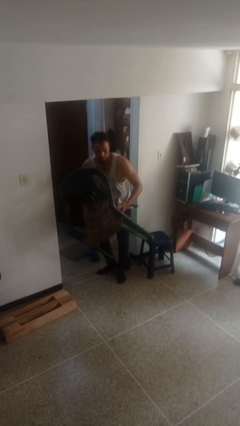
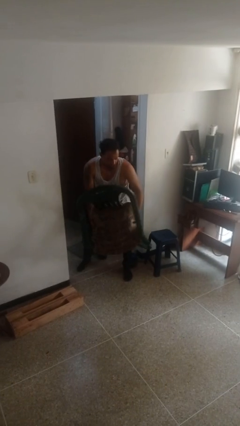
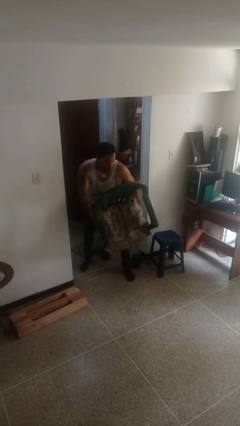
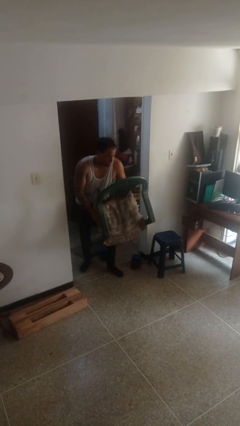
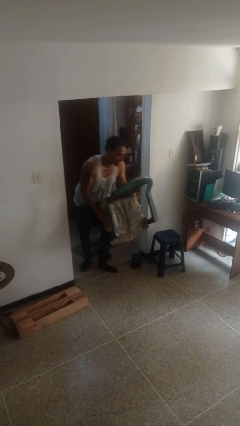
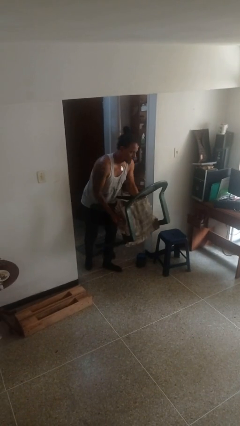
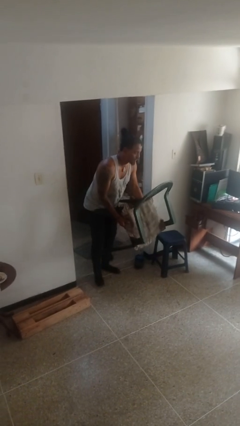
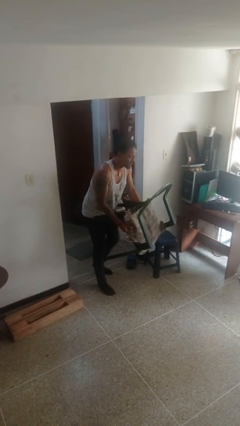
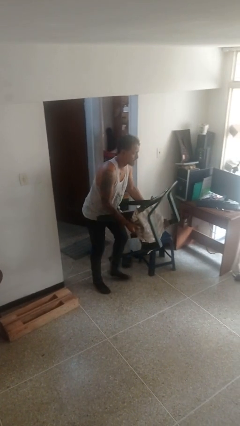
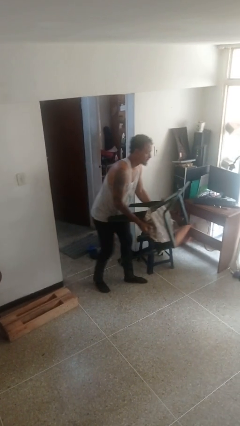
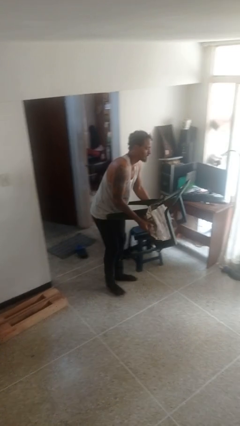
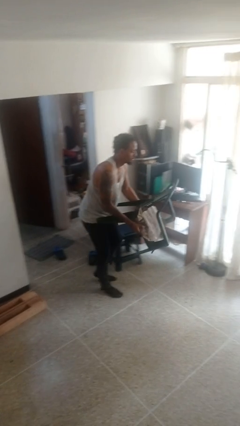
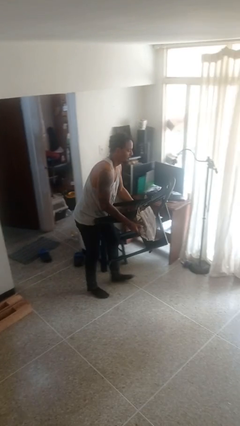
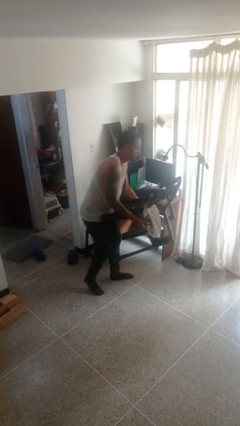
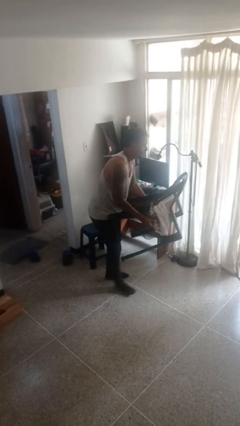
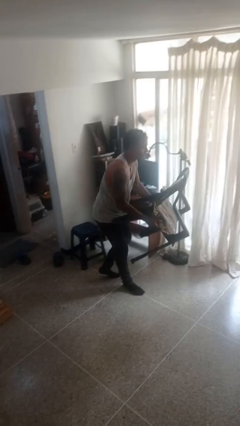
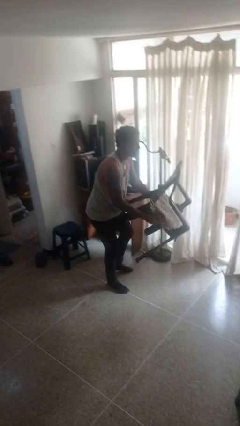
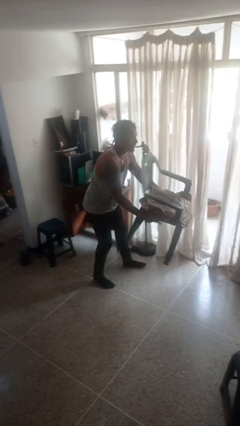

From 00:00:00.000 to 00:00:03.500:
person carries furniture

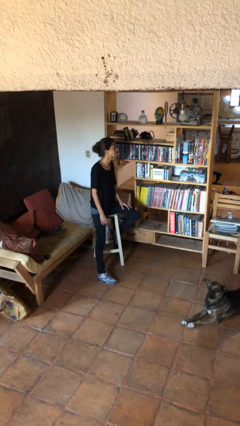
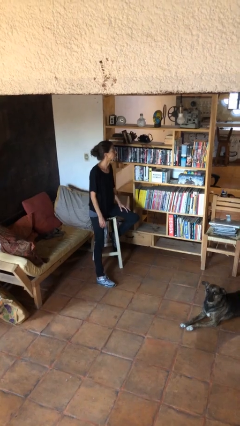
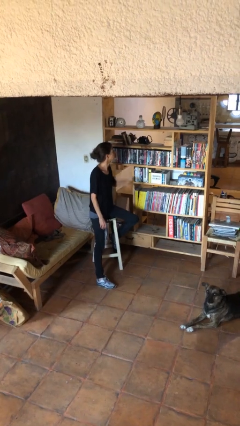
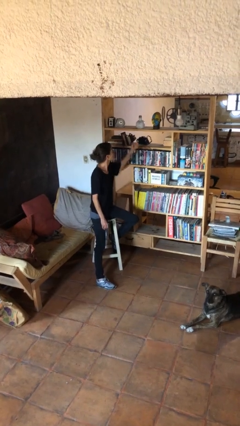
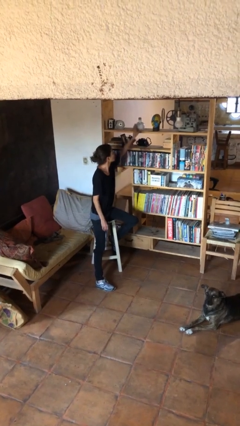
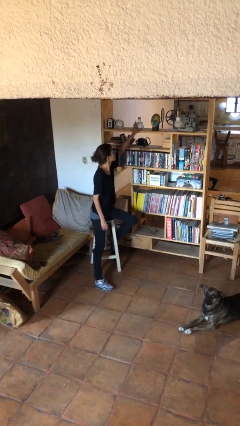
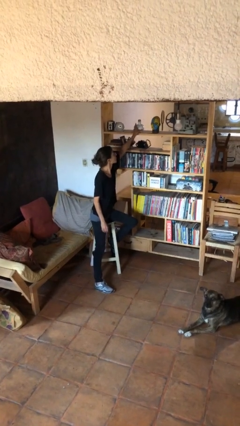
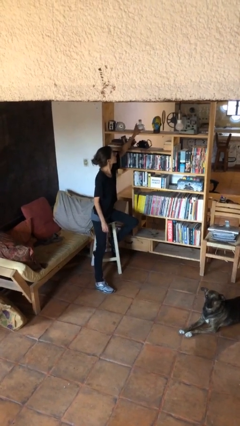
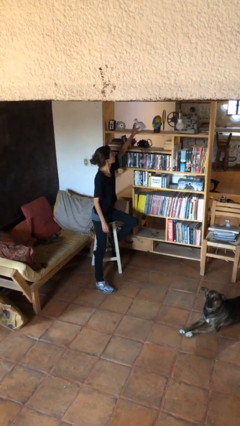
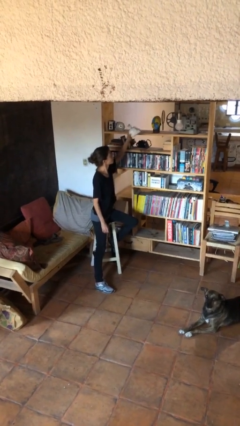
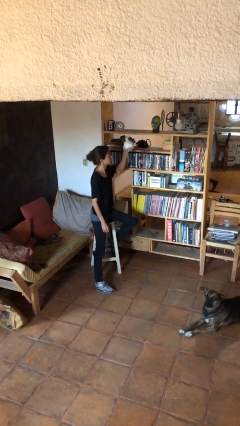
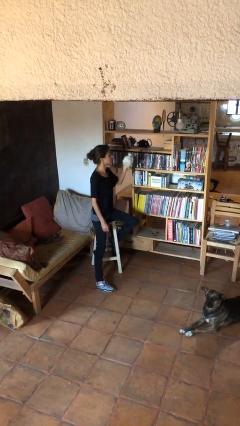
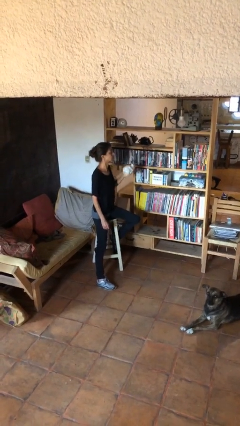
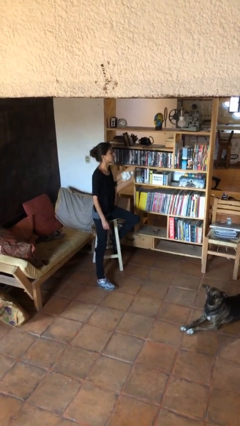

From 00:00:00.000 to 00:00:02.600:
person picks up object from countertop

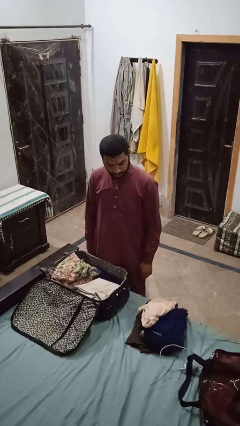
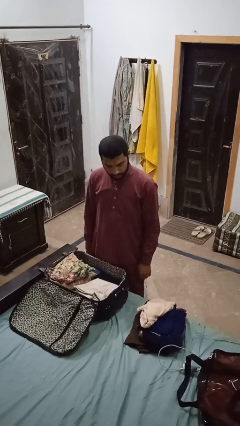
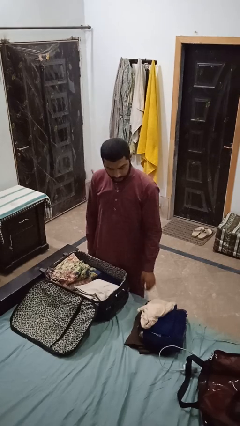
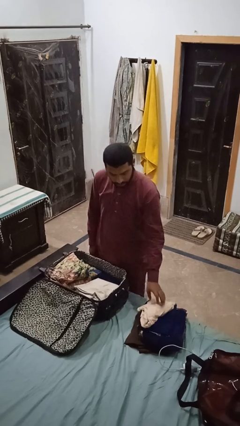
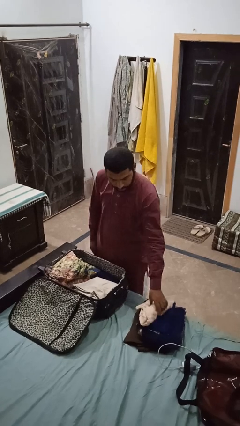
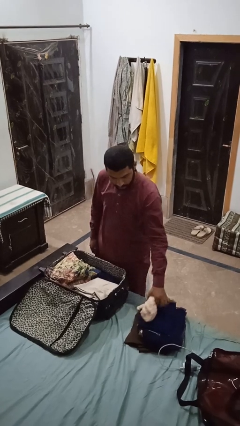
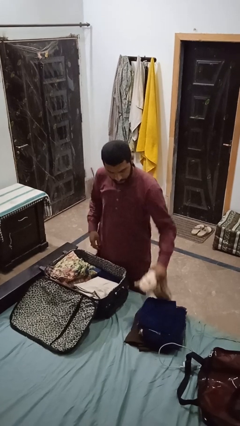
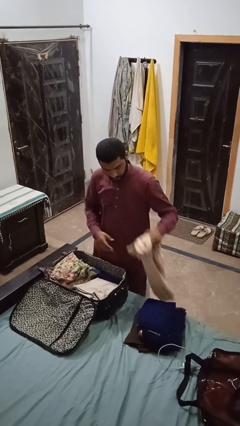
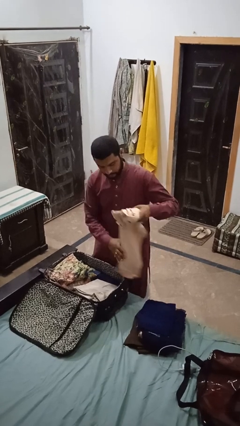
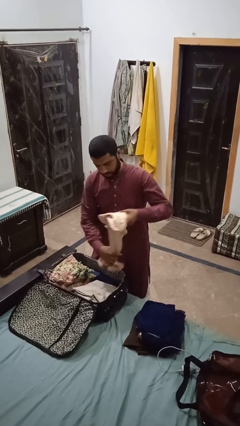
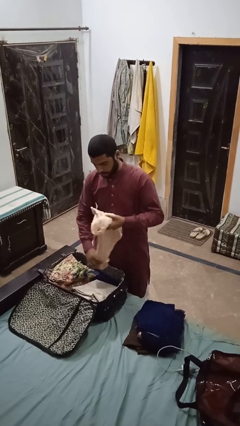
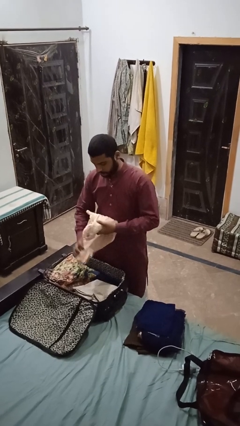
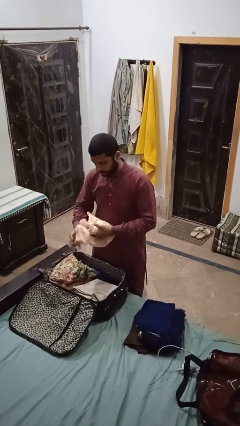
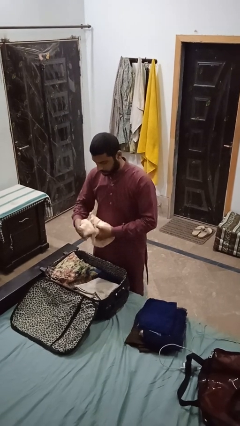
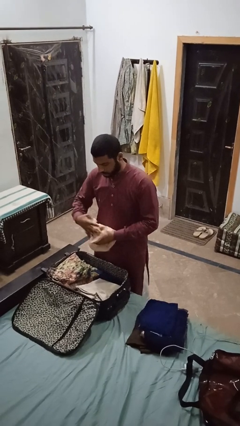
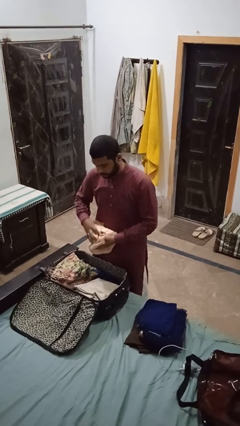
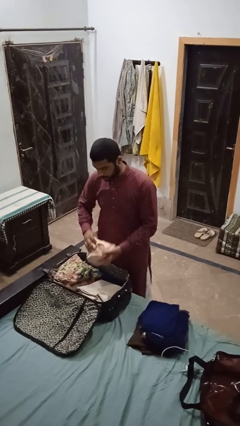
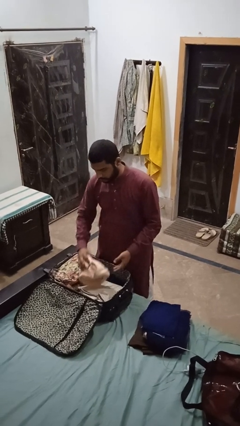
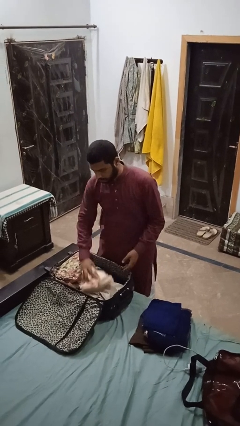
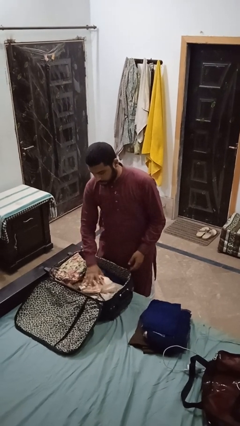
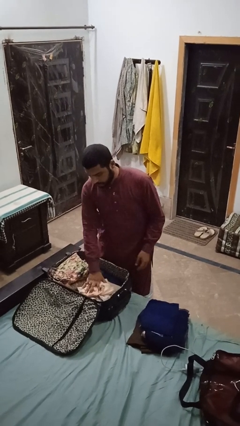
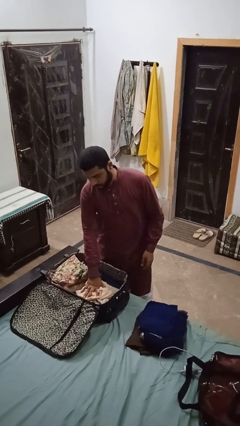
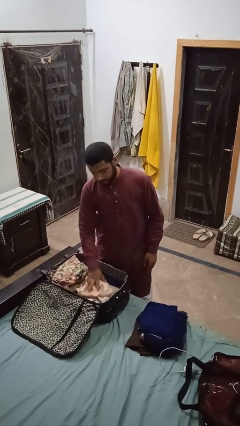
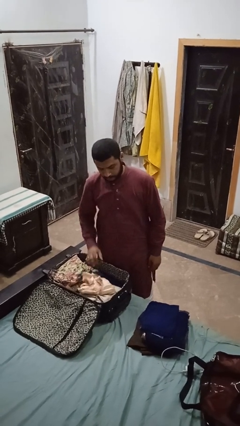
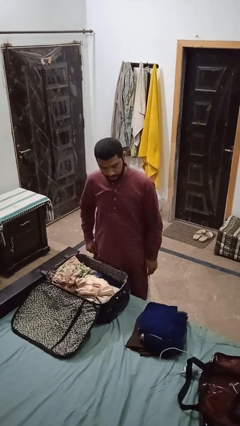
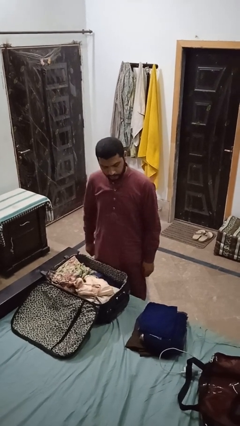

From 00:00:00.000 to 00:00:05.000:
person loads clothes into suitcase

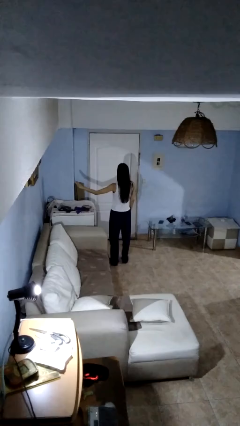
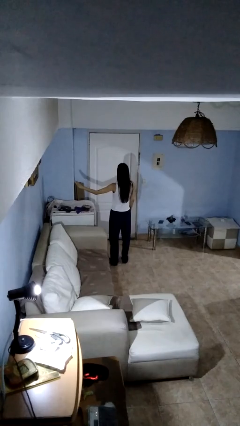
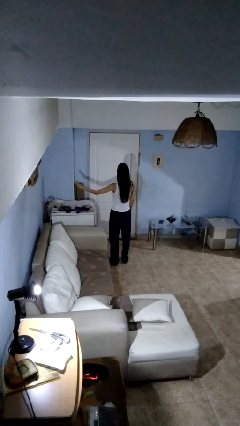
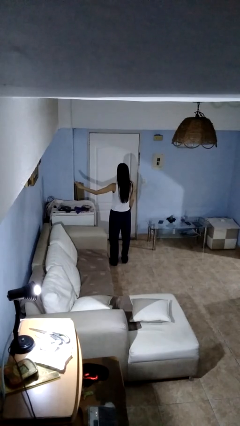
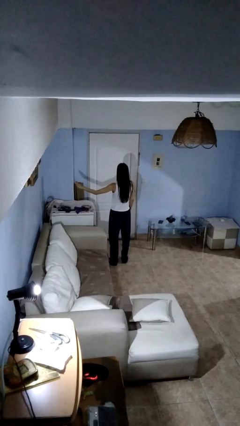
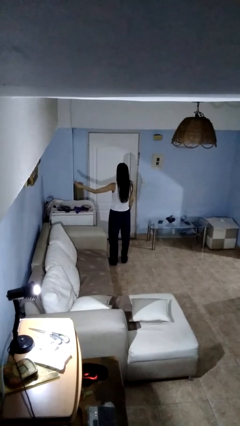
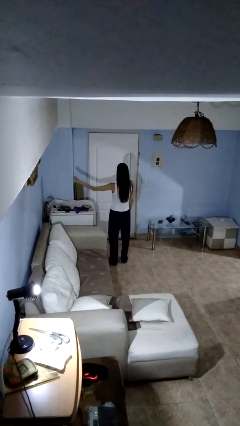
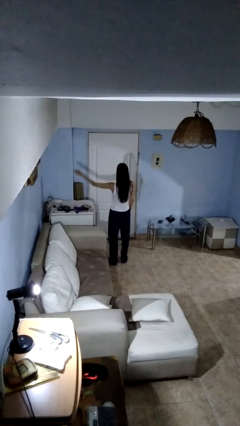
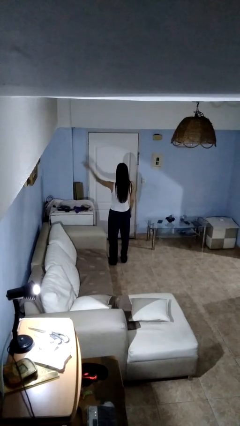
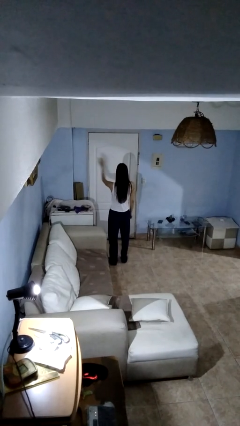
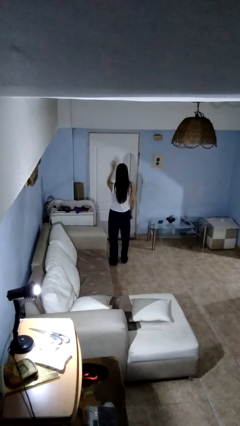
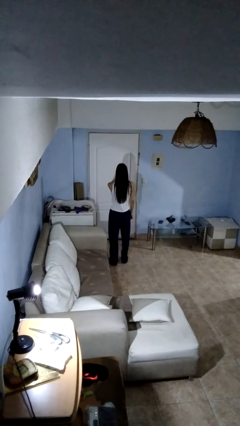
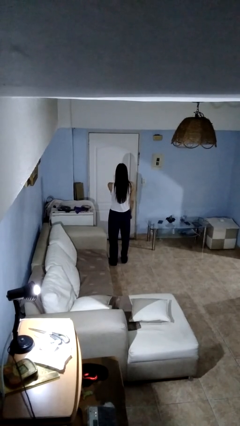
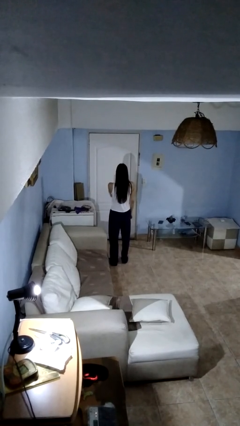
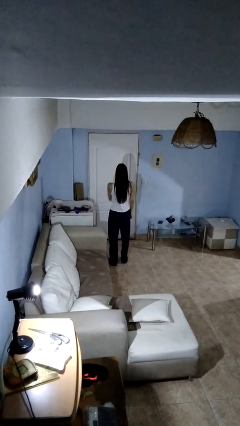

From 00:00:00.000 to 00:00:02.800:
person gestures swipe right

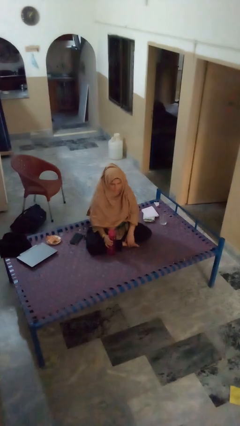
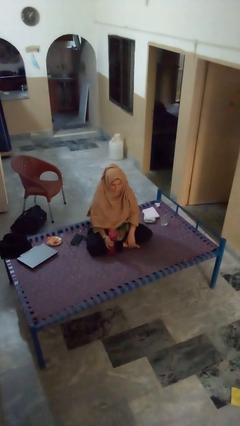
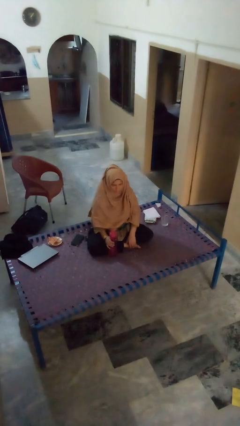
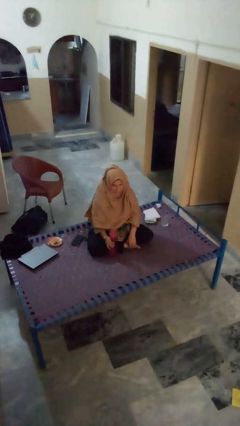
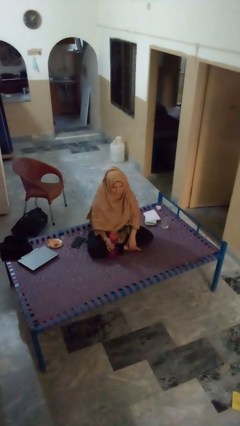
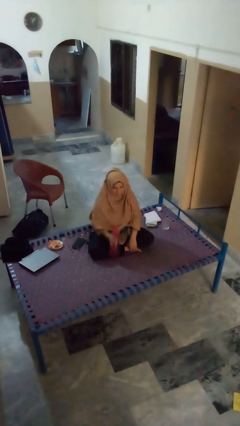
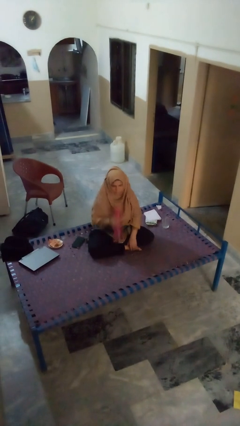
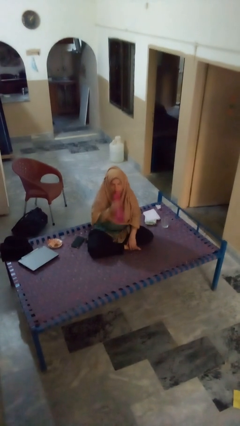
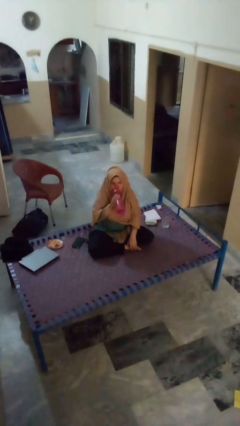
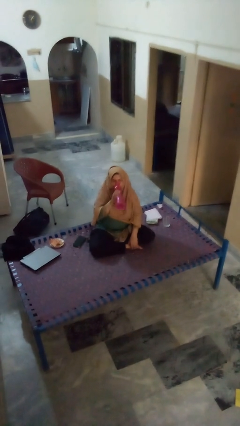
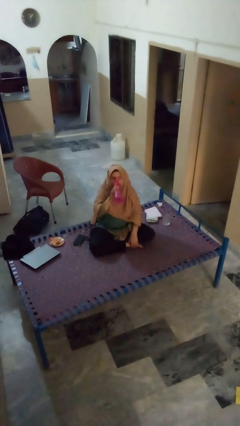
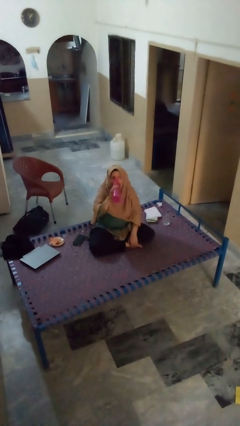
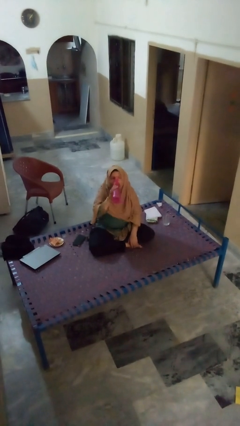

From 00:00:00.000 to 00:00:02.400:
person drinks from bottle

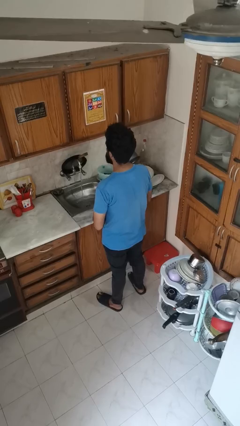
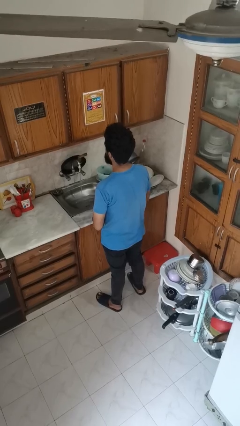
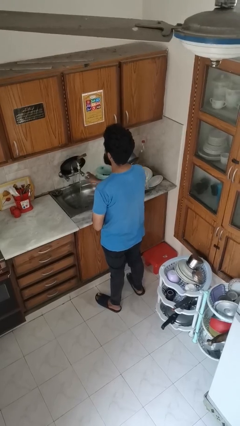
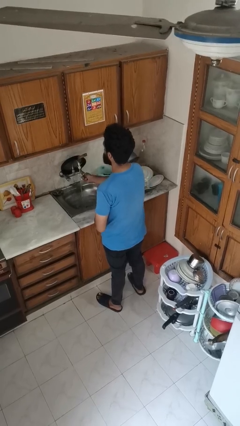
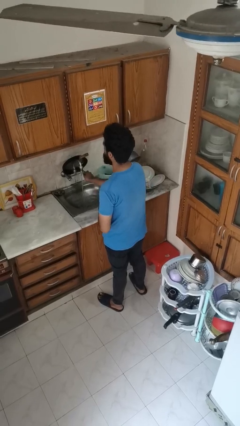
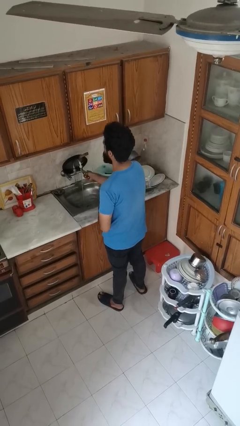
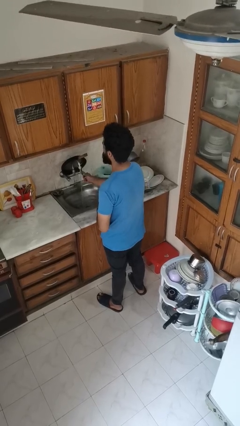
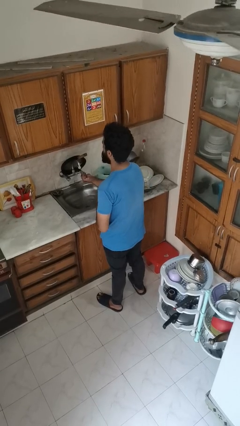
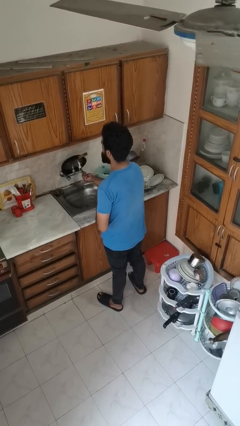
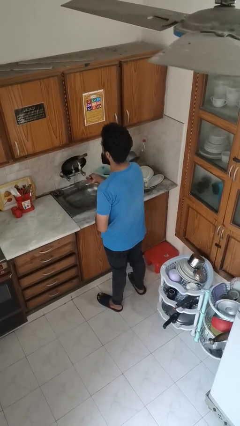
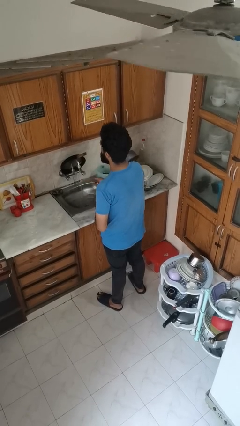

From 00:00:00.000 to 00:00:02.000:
person turns off faucet
